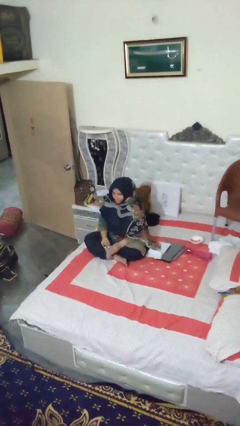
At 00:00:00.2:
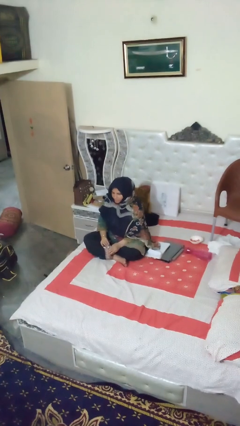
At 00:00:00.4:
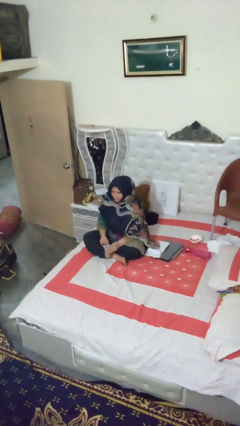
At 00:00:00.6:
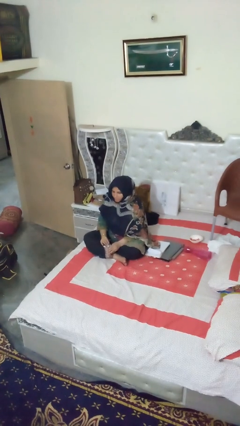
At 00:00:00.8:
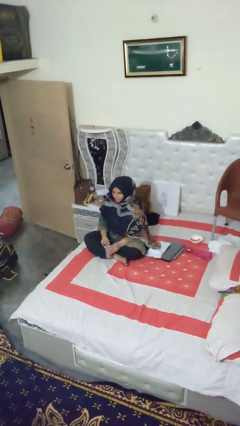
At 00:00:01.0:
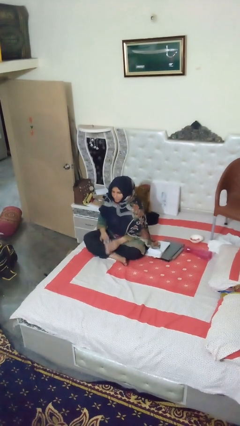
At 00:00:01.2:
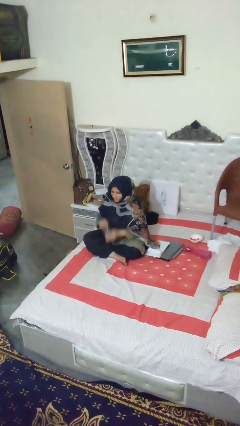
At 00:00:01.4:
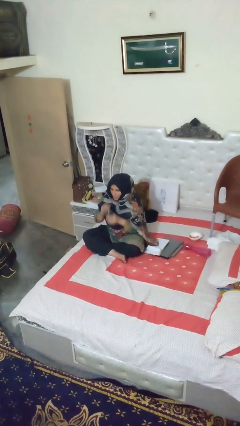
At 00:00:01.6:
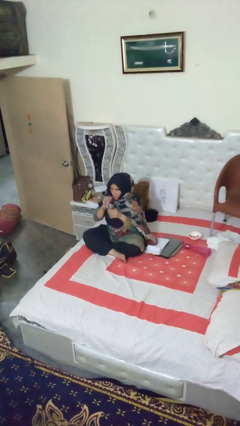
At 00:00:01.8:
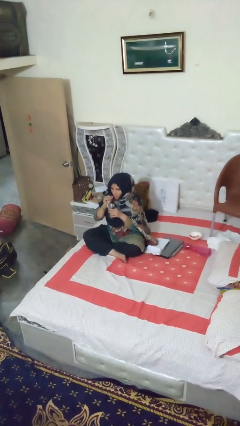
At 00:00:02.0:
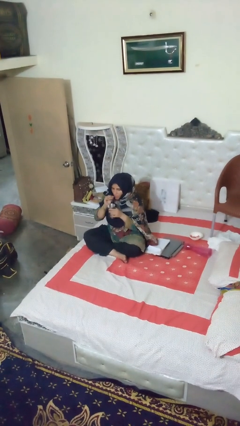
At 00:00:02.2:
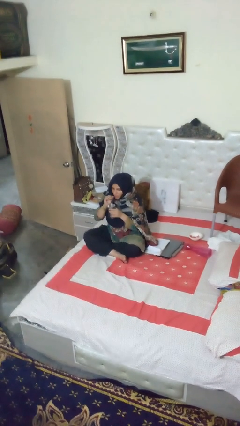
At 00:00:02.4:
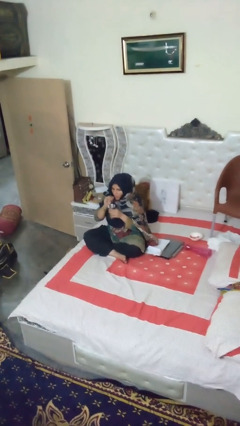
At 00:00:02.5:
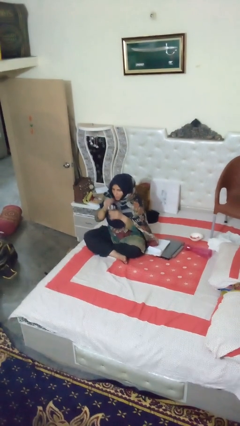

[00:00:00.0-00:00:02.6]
person drinks from straw

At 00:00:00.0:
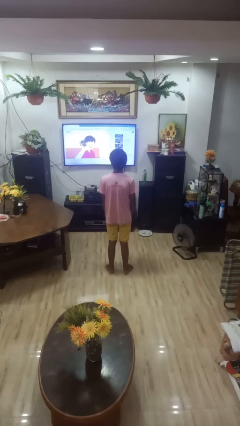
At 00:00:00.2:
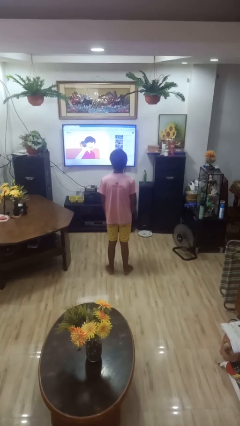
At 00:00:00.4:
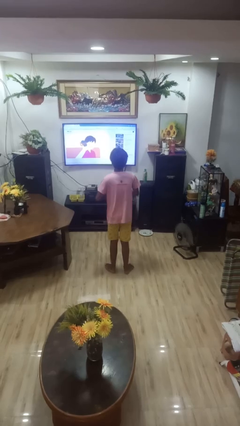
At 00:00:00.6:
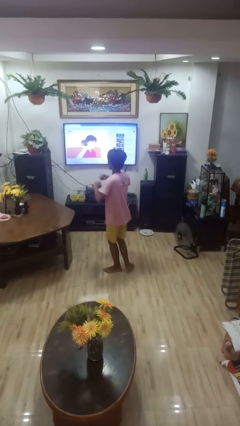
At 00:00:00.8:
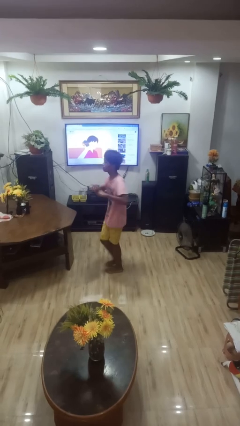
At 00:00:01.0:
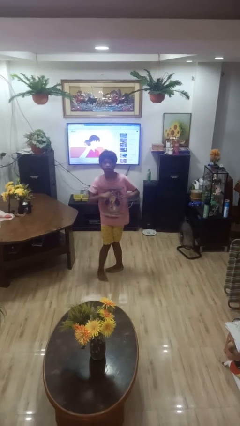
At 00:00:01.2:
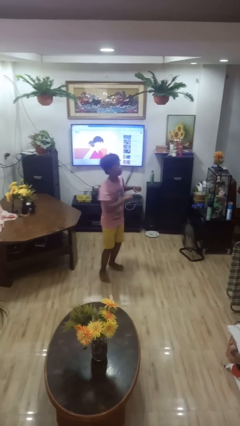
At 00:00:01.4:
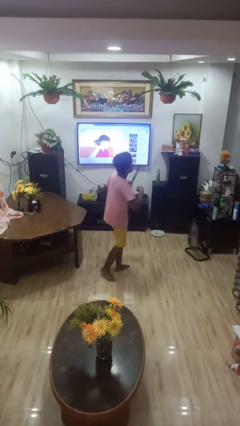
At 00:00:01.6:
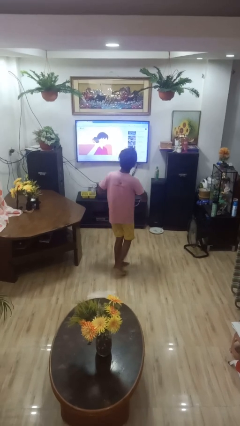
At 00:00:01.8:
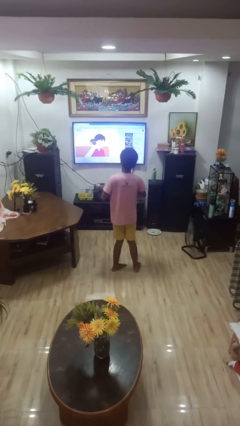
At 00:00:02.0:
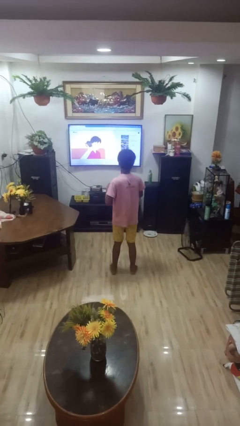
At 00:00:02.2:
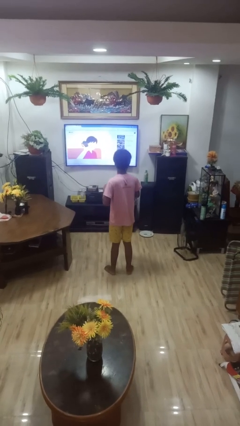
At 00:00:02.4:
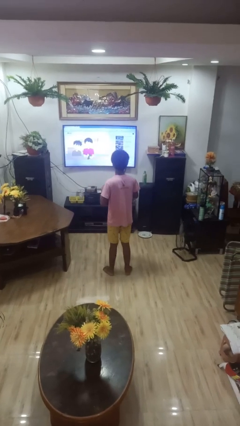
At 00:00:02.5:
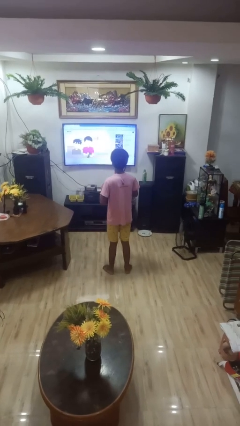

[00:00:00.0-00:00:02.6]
person twirls

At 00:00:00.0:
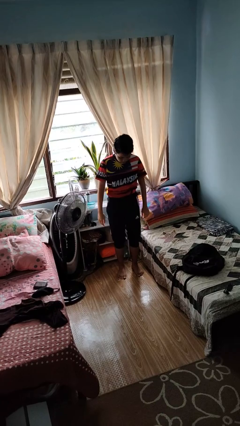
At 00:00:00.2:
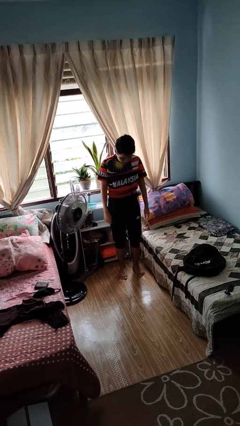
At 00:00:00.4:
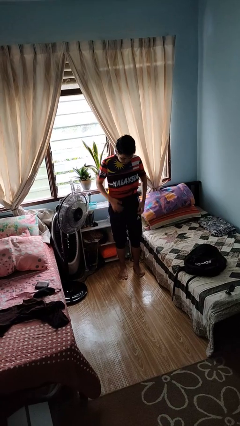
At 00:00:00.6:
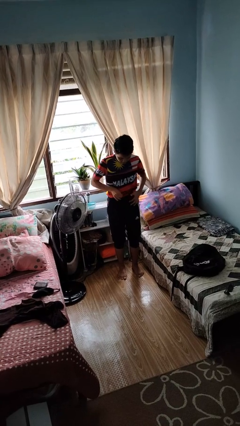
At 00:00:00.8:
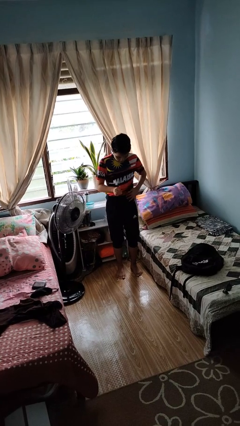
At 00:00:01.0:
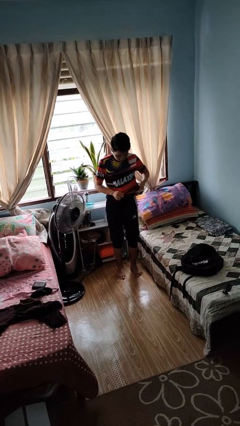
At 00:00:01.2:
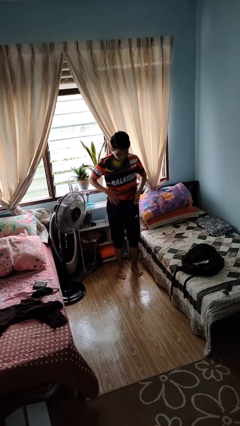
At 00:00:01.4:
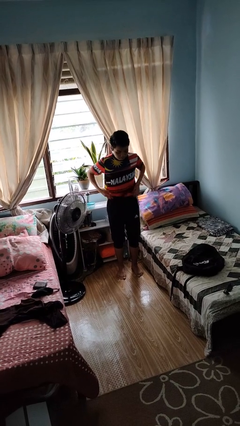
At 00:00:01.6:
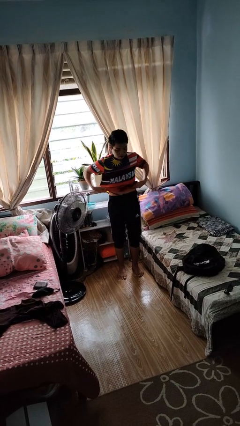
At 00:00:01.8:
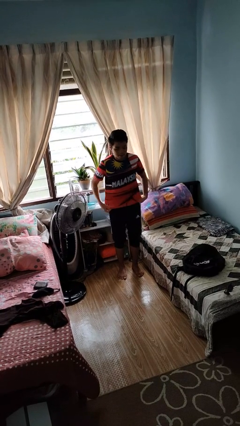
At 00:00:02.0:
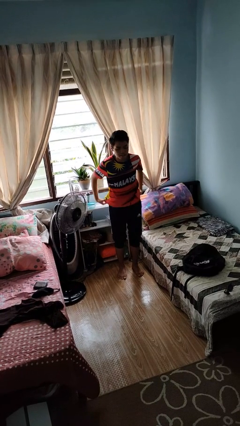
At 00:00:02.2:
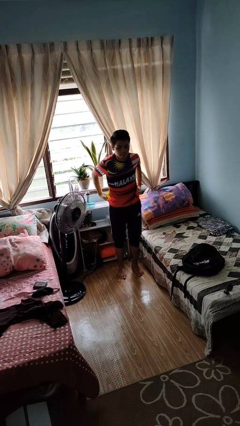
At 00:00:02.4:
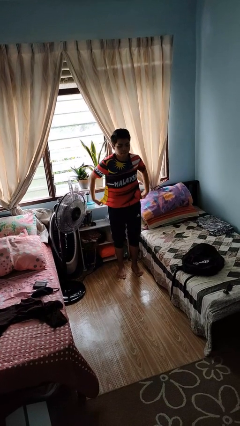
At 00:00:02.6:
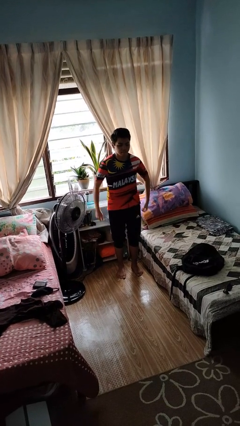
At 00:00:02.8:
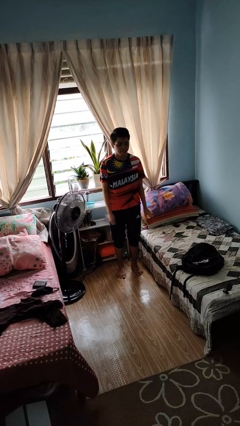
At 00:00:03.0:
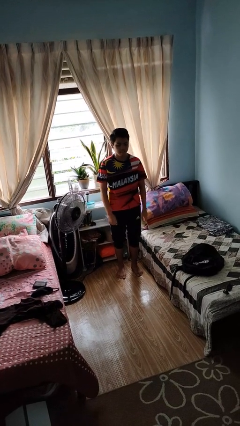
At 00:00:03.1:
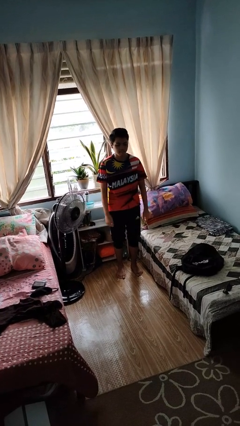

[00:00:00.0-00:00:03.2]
person untucks shirt

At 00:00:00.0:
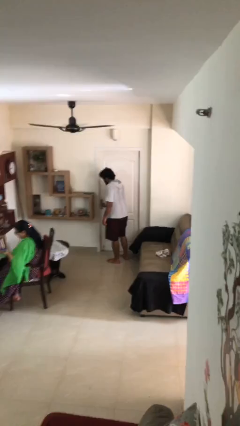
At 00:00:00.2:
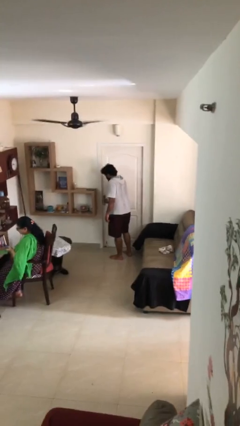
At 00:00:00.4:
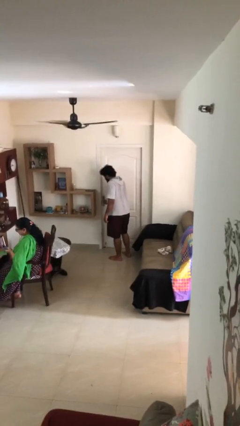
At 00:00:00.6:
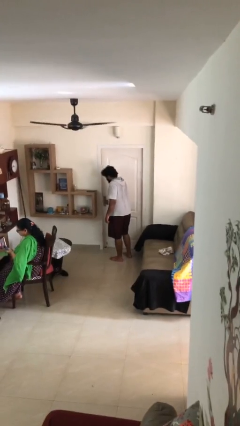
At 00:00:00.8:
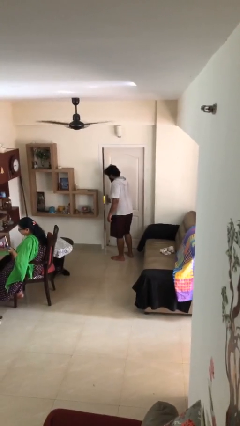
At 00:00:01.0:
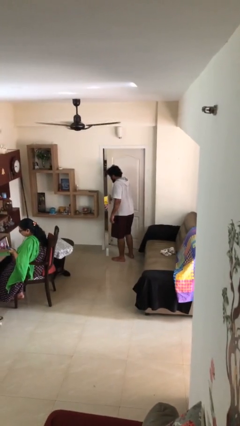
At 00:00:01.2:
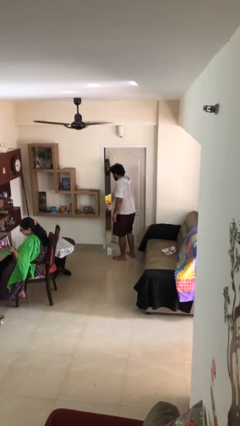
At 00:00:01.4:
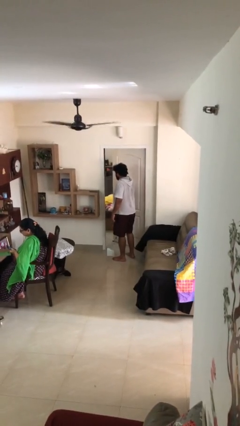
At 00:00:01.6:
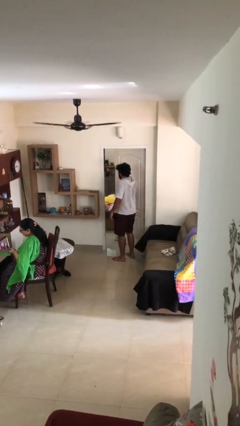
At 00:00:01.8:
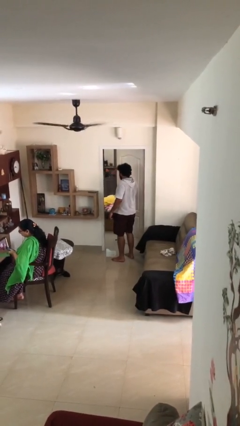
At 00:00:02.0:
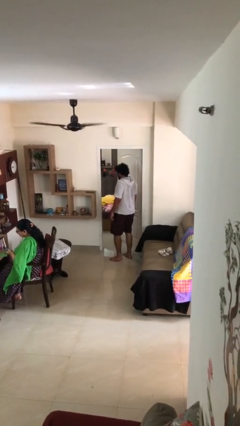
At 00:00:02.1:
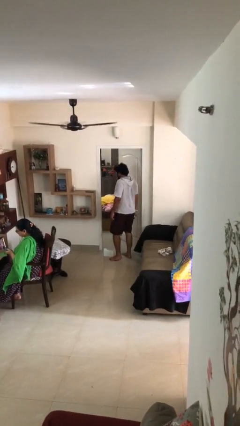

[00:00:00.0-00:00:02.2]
person opens facility door

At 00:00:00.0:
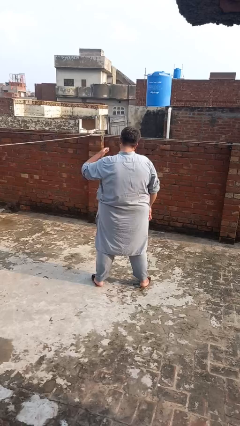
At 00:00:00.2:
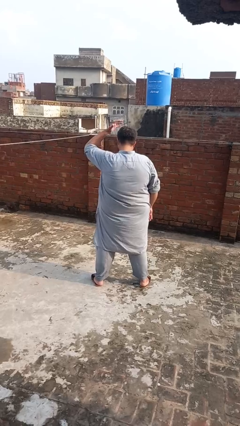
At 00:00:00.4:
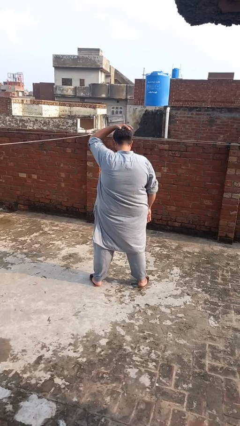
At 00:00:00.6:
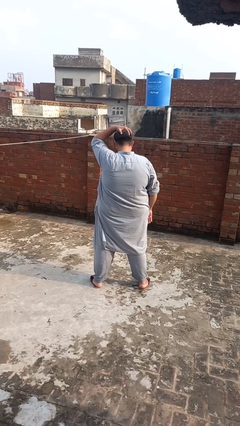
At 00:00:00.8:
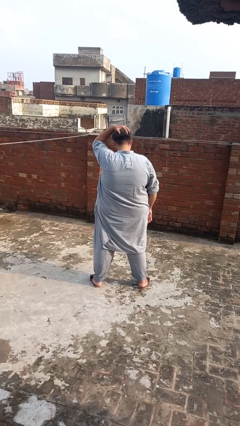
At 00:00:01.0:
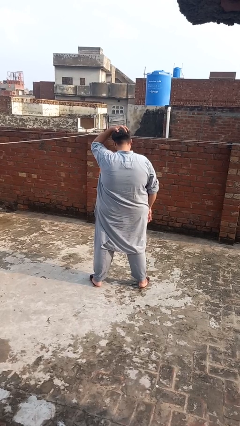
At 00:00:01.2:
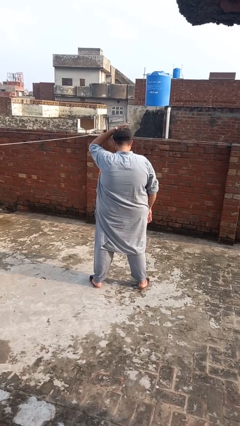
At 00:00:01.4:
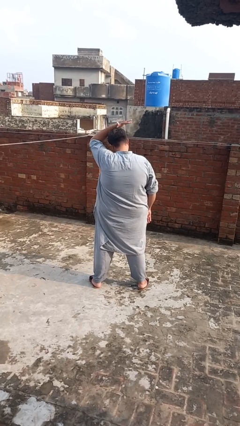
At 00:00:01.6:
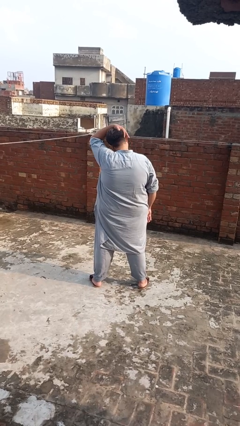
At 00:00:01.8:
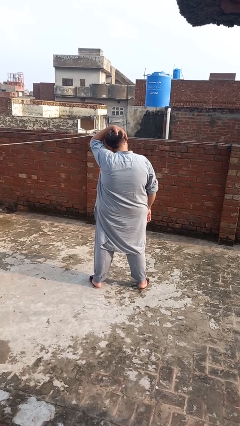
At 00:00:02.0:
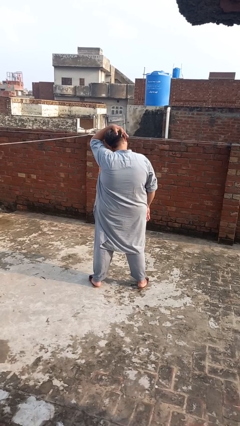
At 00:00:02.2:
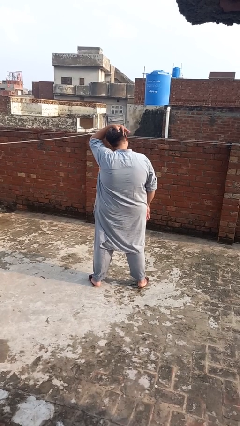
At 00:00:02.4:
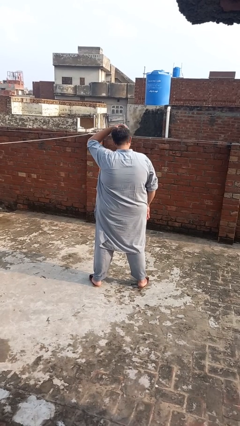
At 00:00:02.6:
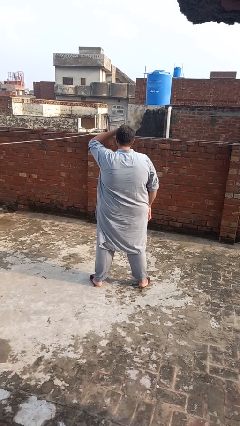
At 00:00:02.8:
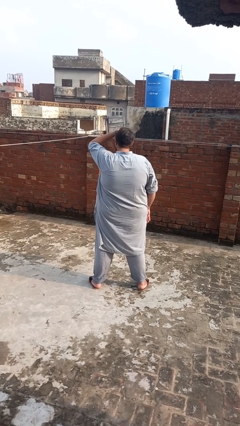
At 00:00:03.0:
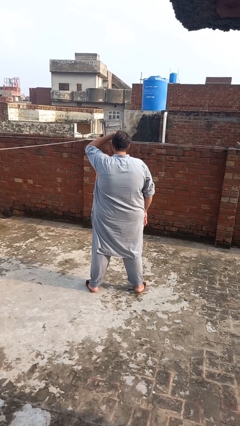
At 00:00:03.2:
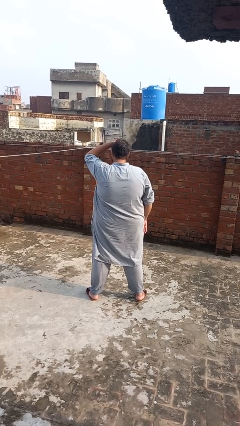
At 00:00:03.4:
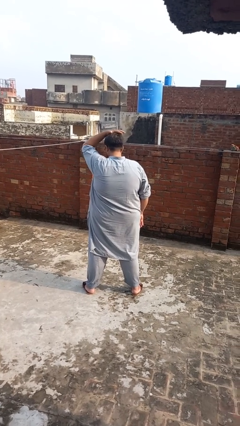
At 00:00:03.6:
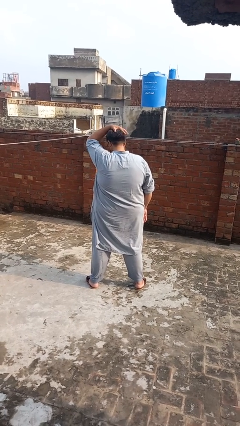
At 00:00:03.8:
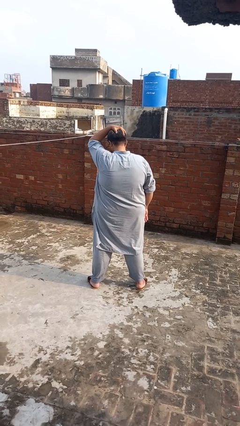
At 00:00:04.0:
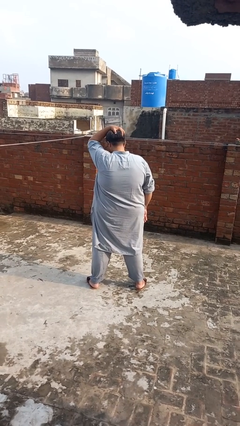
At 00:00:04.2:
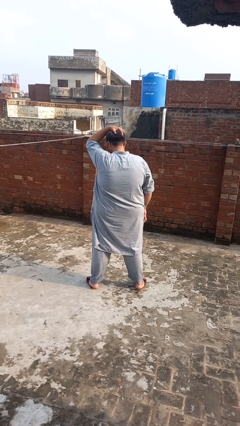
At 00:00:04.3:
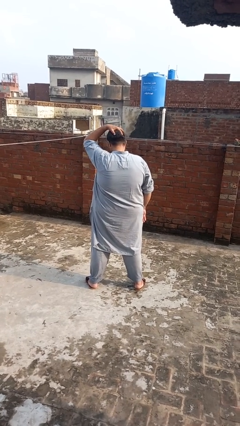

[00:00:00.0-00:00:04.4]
person pats head

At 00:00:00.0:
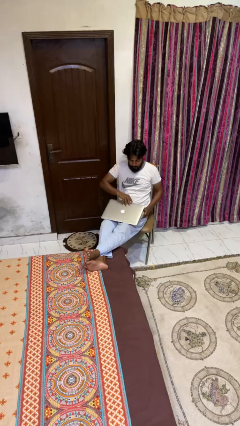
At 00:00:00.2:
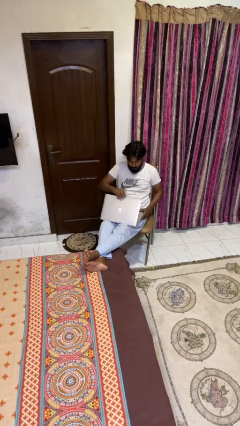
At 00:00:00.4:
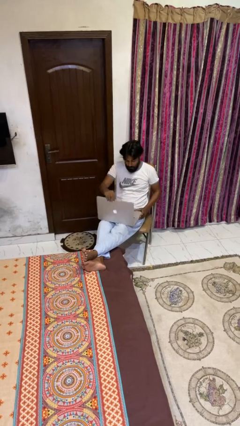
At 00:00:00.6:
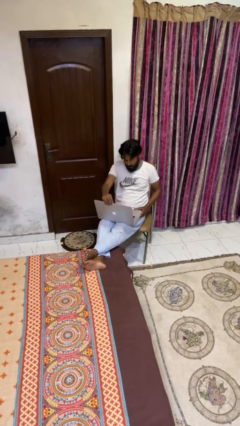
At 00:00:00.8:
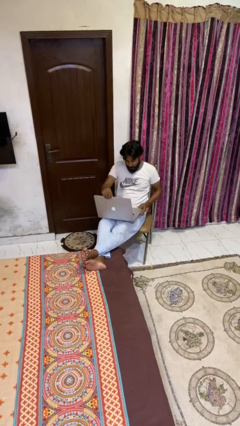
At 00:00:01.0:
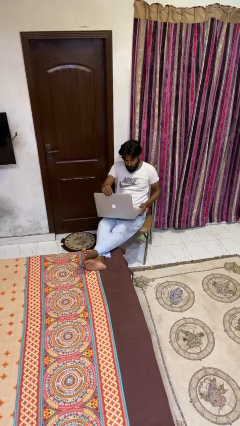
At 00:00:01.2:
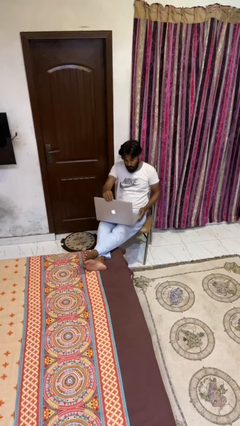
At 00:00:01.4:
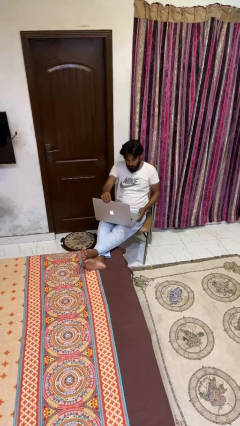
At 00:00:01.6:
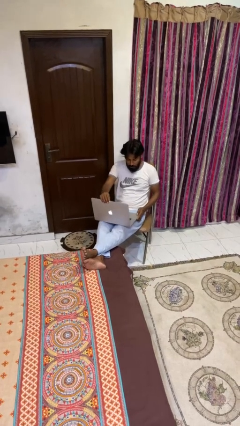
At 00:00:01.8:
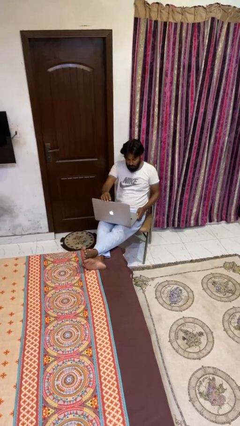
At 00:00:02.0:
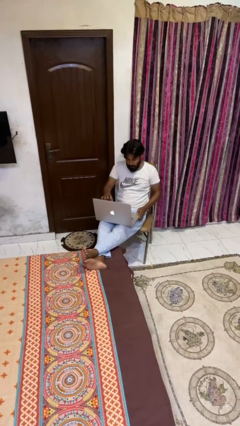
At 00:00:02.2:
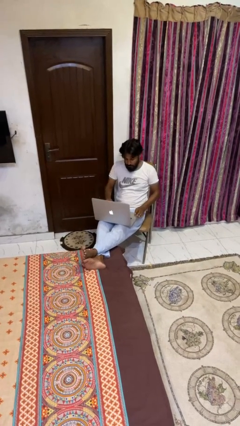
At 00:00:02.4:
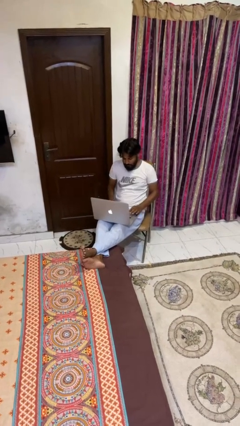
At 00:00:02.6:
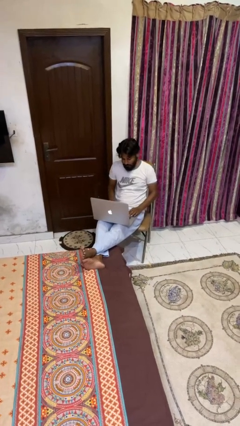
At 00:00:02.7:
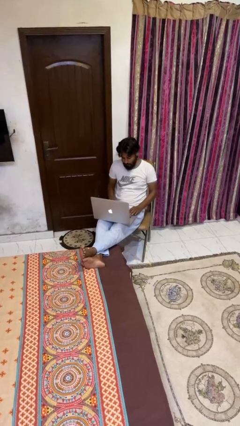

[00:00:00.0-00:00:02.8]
person opens laptop
